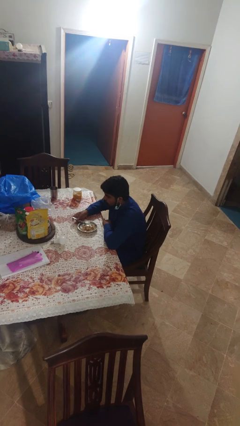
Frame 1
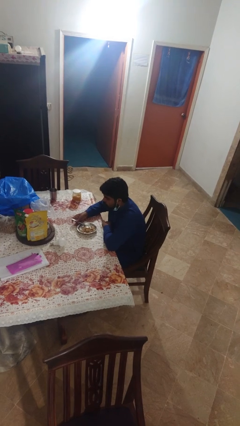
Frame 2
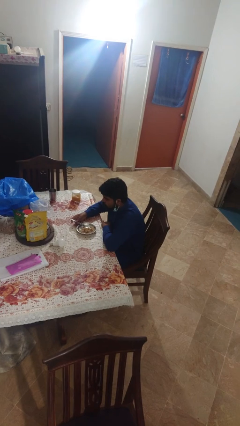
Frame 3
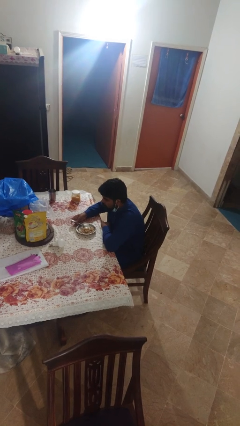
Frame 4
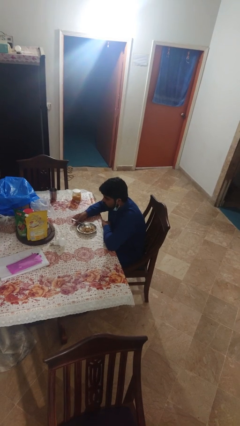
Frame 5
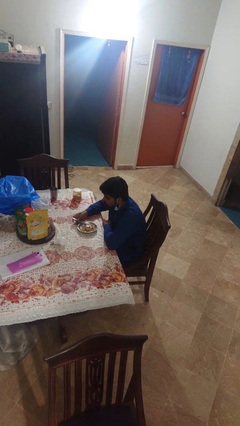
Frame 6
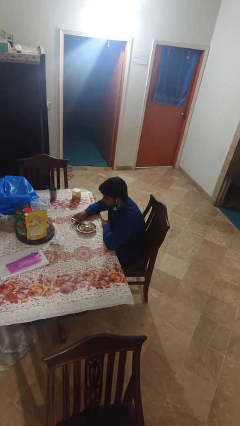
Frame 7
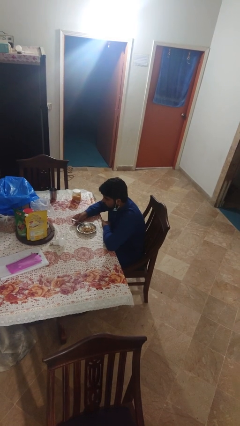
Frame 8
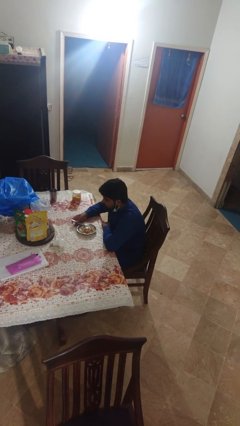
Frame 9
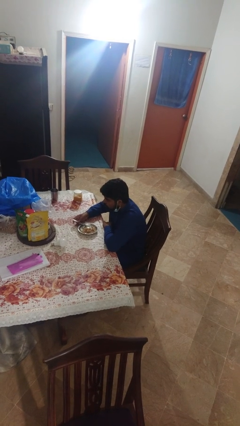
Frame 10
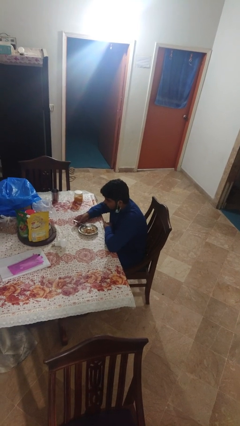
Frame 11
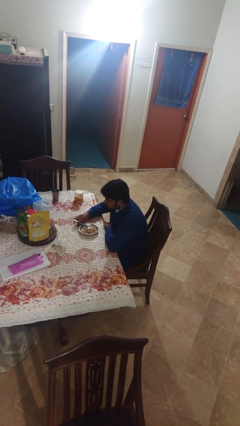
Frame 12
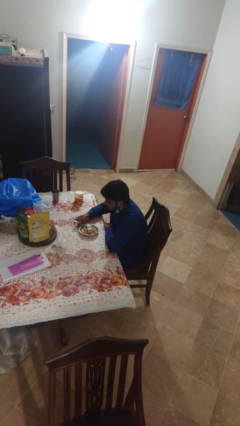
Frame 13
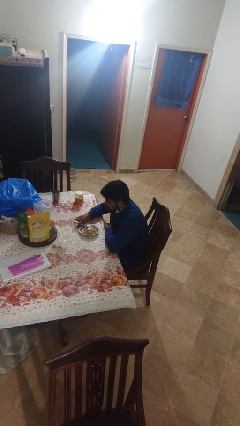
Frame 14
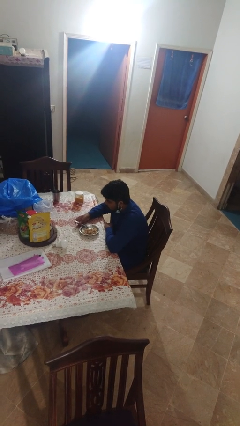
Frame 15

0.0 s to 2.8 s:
person eats with utensil

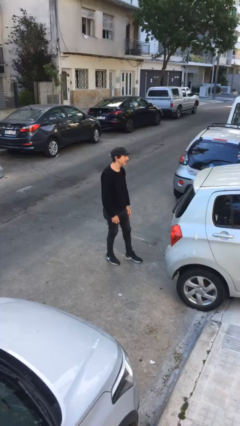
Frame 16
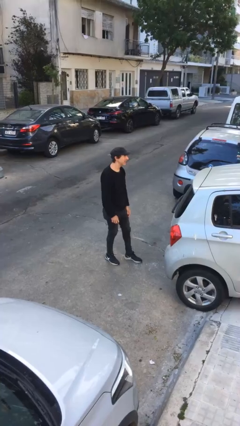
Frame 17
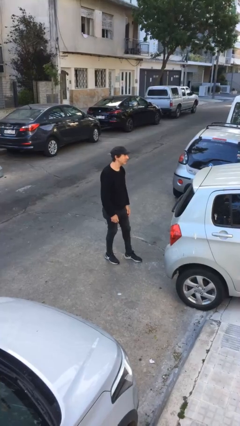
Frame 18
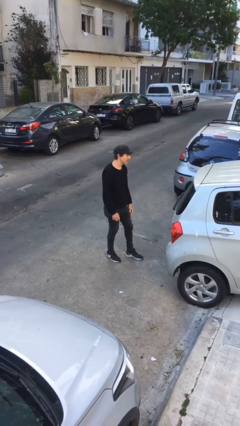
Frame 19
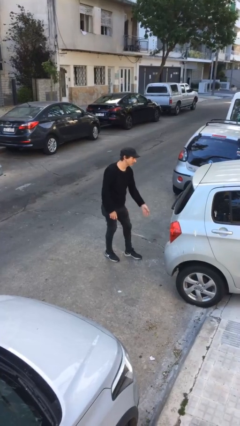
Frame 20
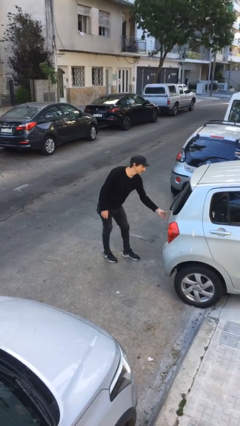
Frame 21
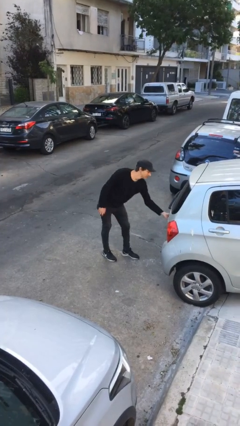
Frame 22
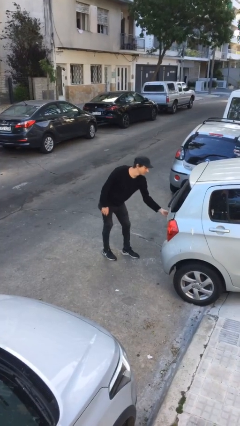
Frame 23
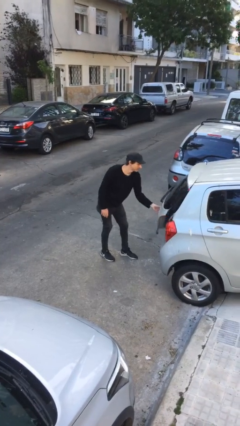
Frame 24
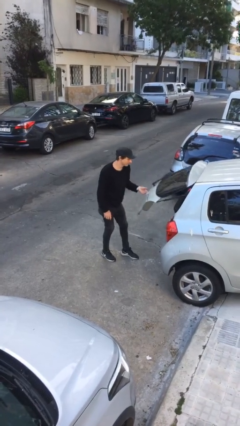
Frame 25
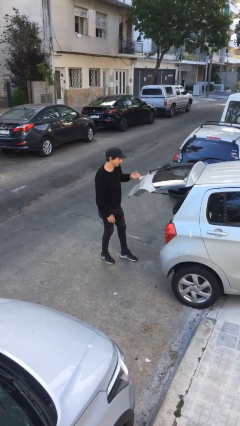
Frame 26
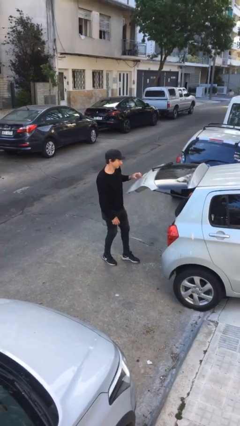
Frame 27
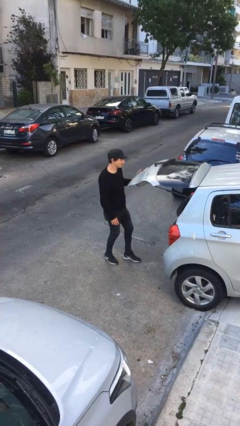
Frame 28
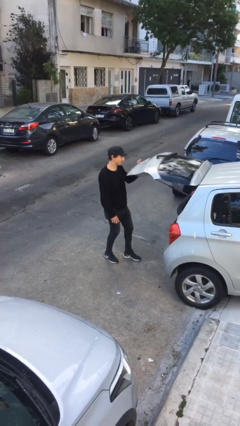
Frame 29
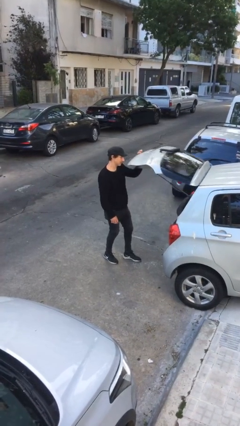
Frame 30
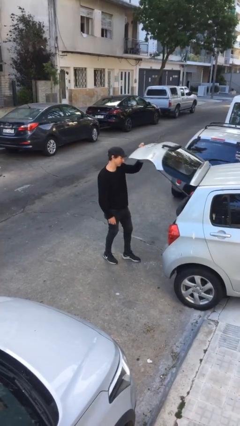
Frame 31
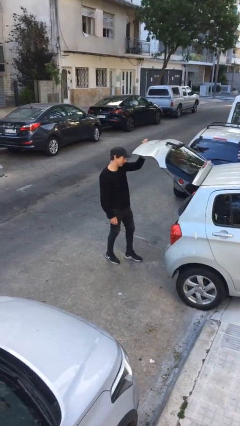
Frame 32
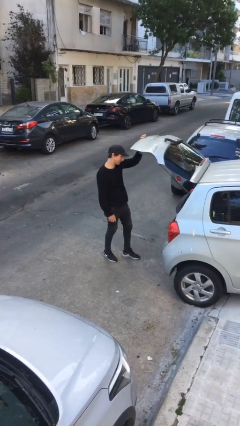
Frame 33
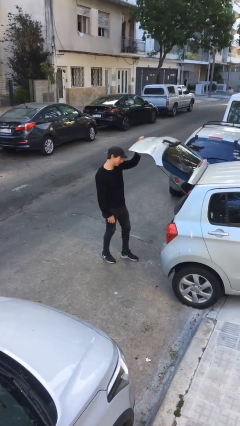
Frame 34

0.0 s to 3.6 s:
person opens car trunk

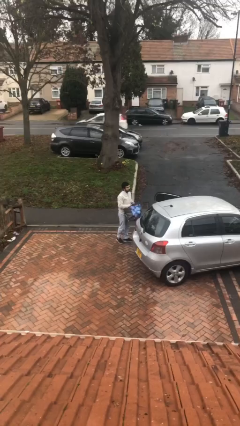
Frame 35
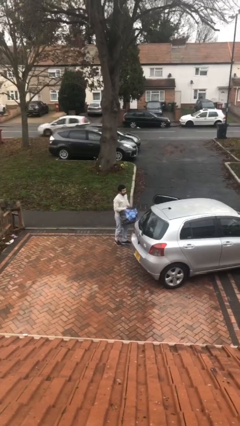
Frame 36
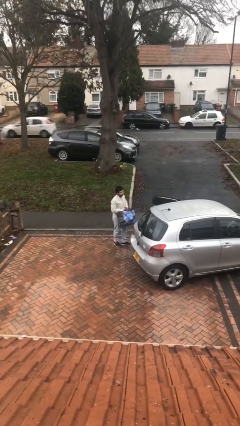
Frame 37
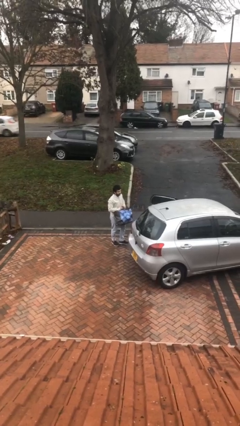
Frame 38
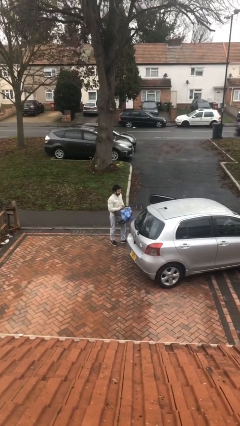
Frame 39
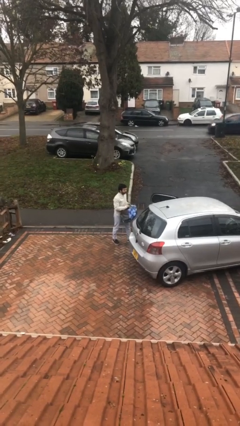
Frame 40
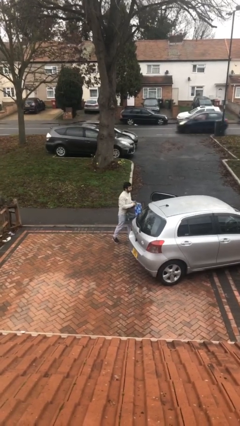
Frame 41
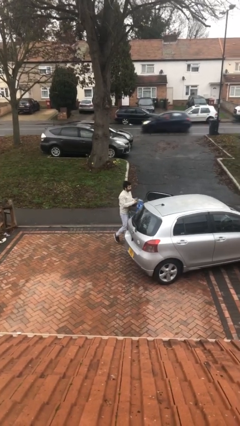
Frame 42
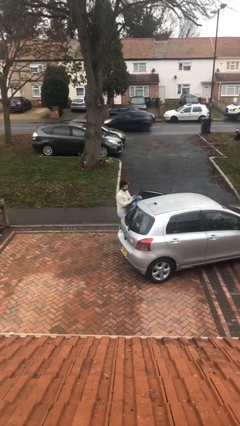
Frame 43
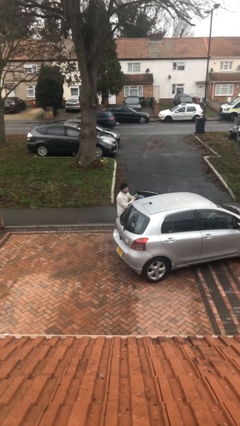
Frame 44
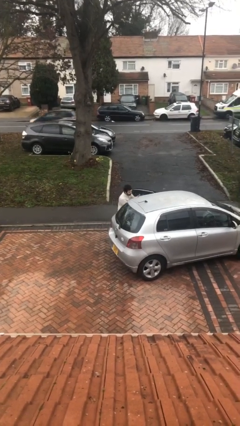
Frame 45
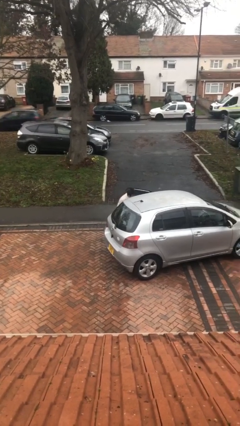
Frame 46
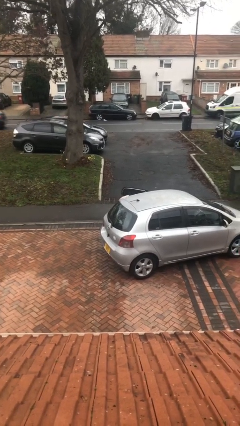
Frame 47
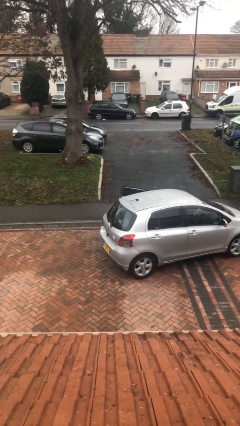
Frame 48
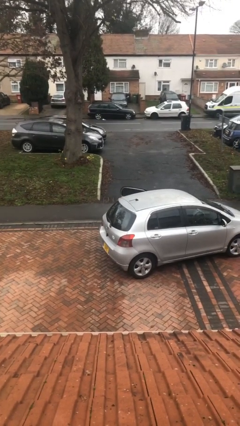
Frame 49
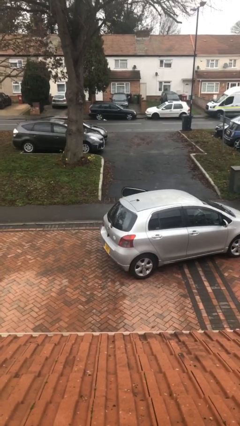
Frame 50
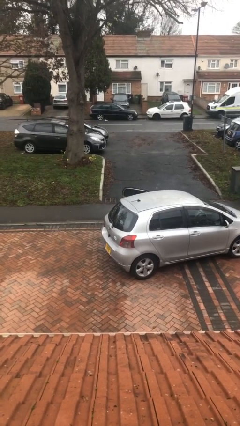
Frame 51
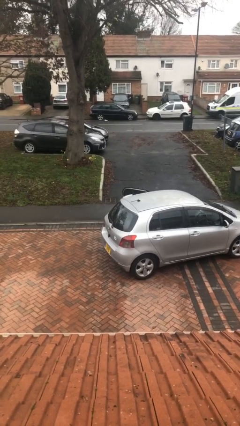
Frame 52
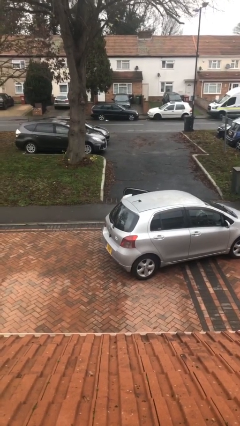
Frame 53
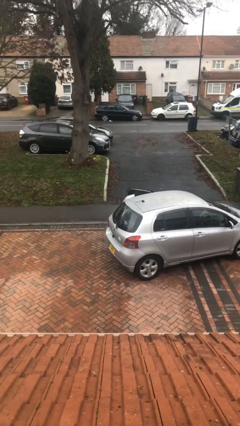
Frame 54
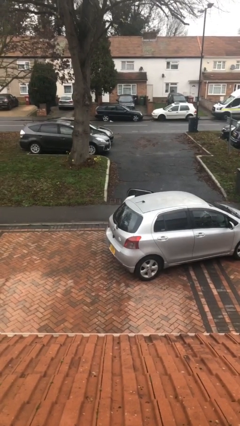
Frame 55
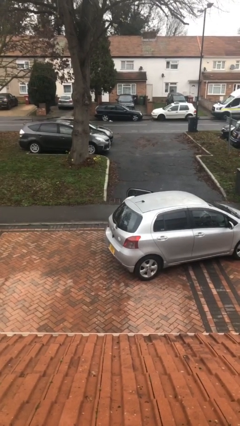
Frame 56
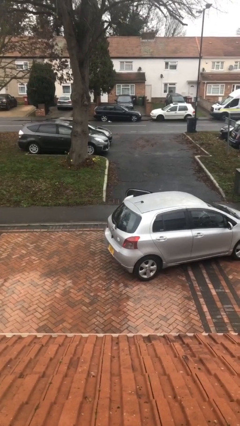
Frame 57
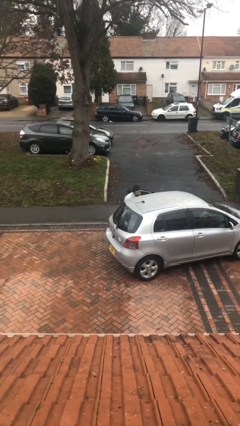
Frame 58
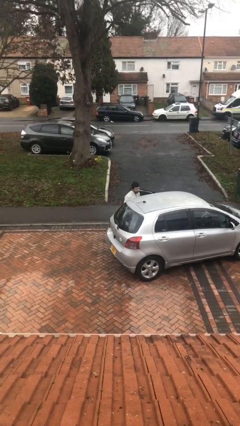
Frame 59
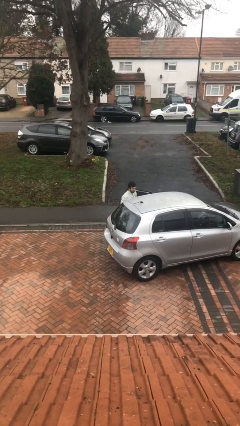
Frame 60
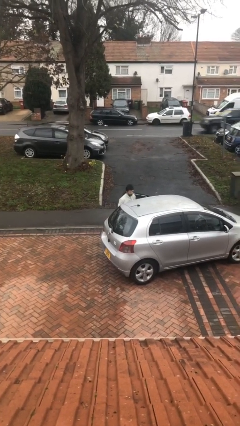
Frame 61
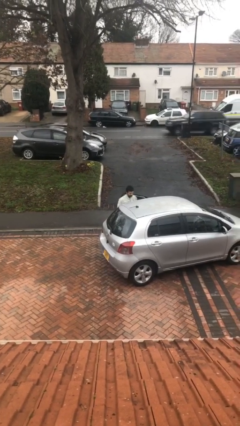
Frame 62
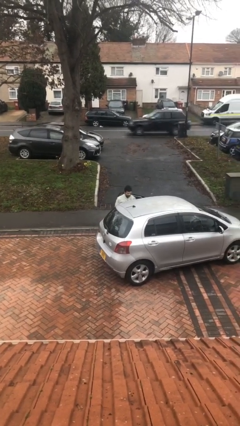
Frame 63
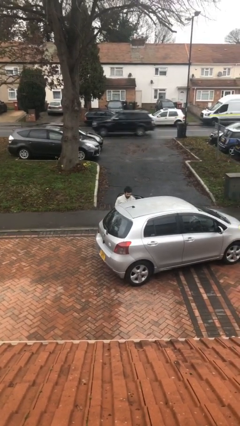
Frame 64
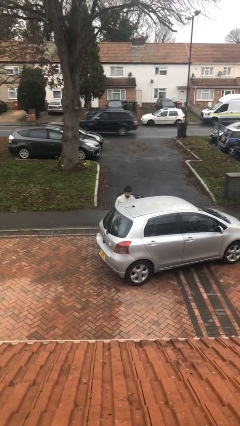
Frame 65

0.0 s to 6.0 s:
person loads car

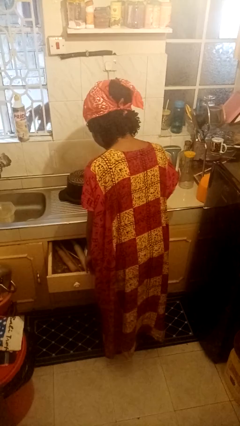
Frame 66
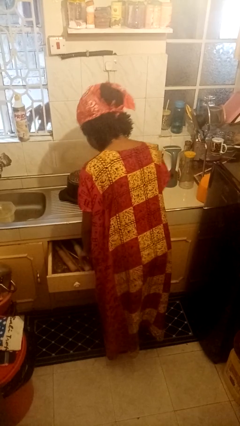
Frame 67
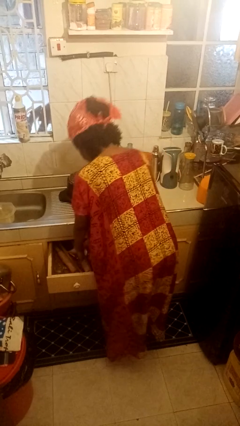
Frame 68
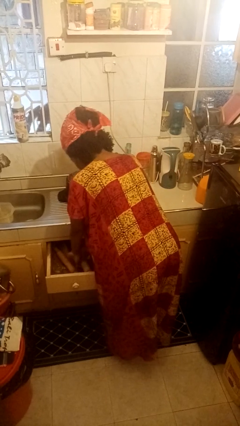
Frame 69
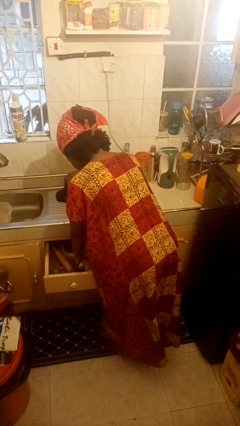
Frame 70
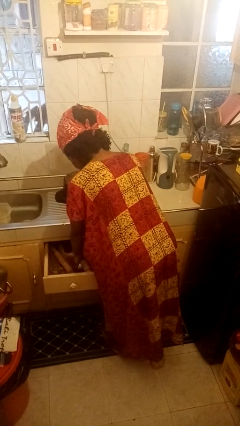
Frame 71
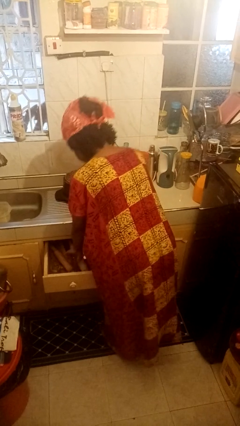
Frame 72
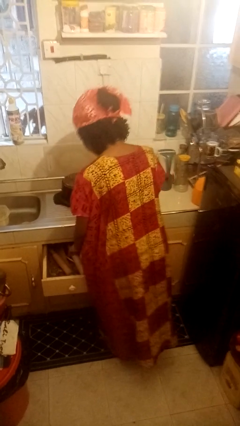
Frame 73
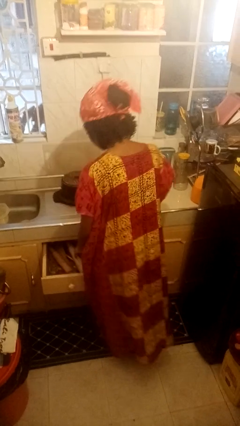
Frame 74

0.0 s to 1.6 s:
person searches in kitchen drawer

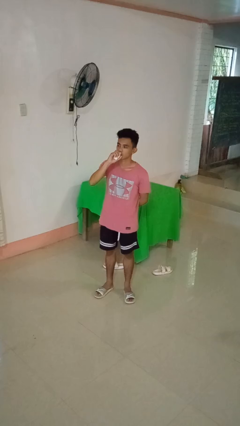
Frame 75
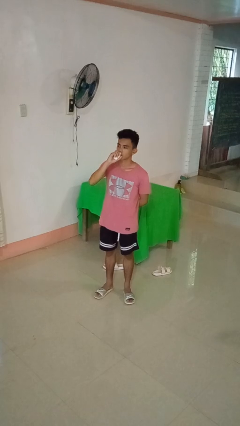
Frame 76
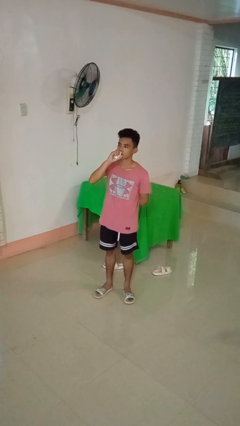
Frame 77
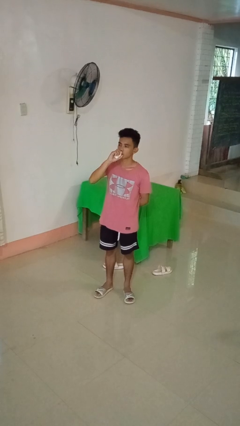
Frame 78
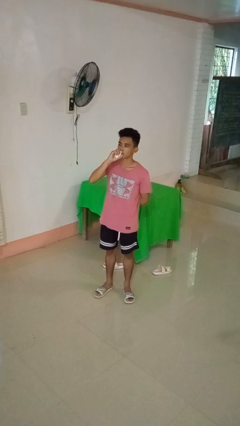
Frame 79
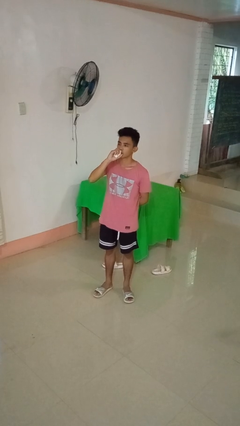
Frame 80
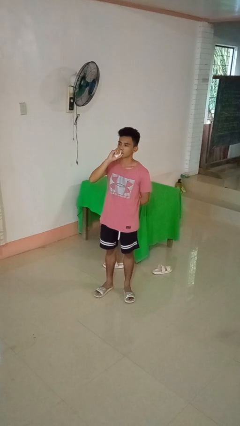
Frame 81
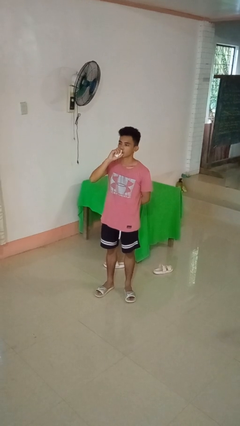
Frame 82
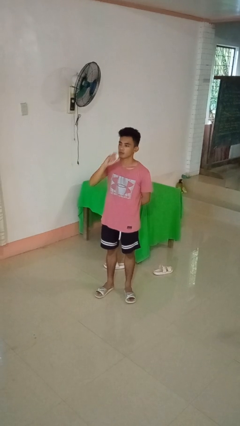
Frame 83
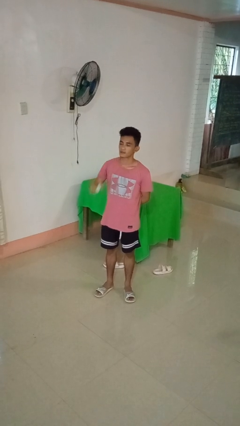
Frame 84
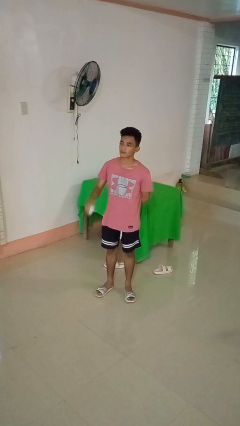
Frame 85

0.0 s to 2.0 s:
person vapes

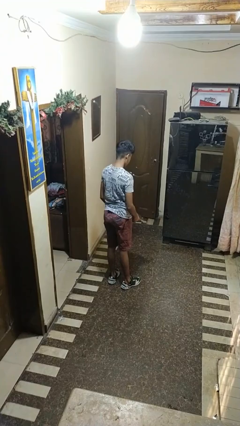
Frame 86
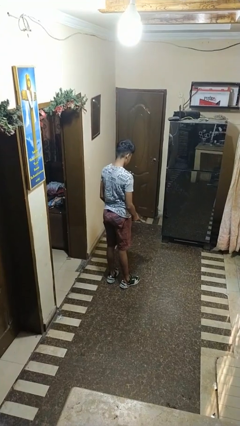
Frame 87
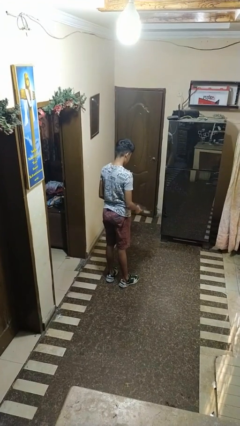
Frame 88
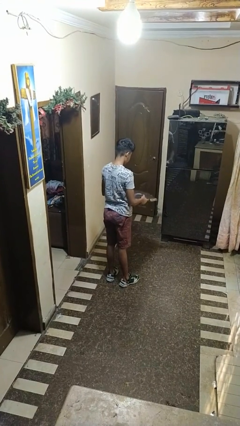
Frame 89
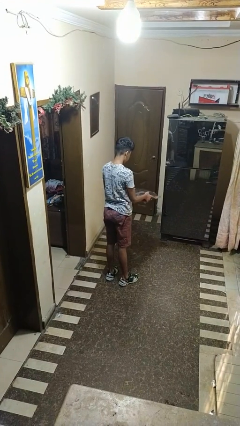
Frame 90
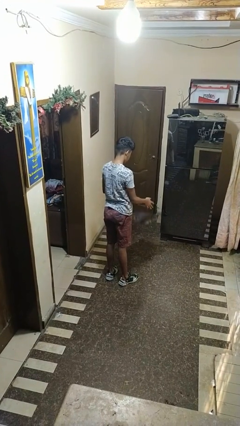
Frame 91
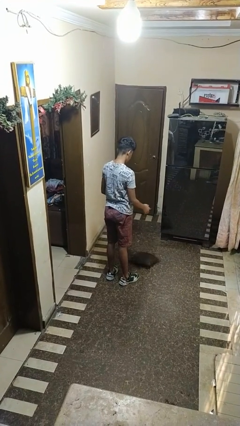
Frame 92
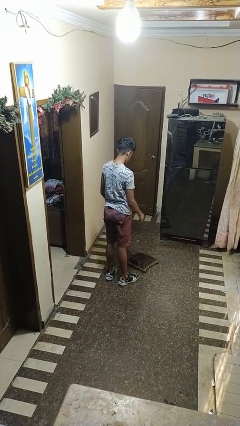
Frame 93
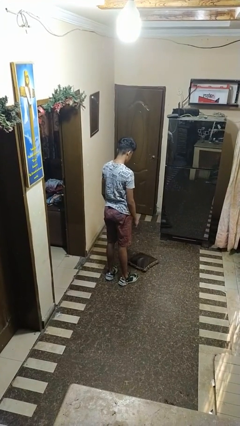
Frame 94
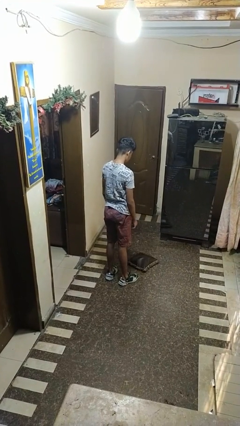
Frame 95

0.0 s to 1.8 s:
person throws object to ground
